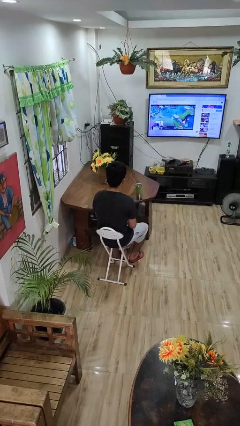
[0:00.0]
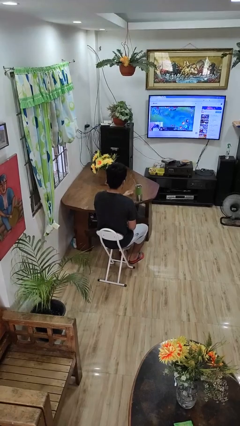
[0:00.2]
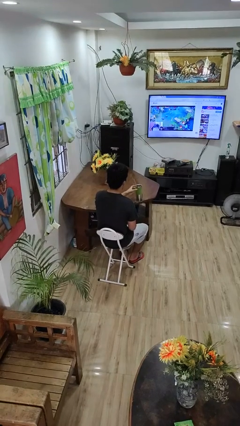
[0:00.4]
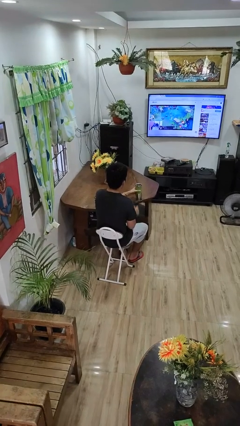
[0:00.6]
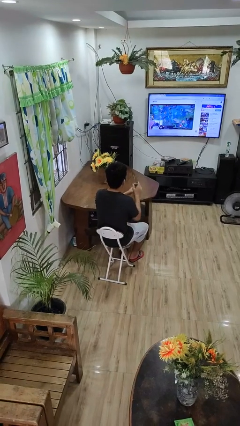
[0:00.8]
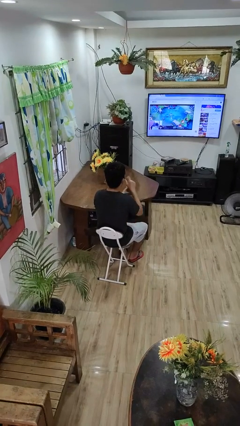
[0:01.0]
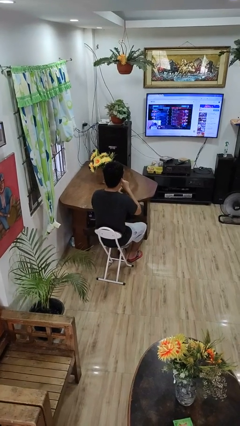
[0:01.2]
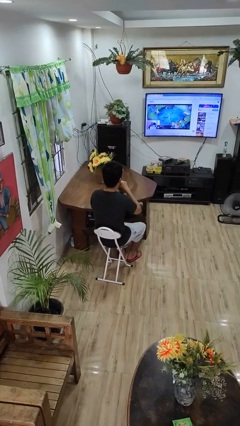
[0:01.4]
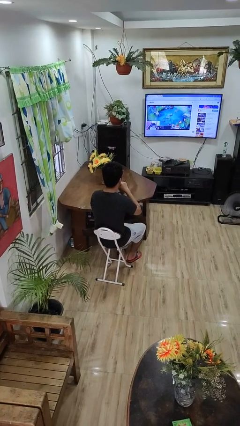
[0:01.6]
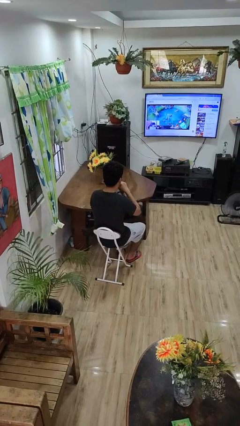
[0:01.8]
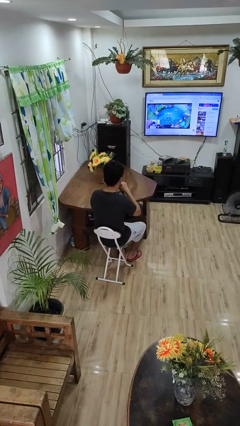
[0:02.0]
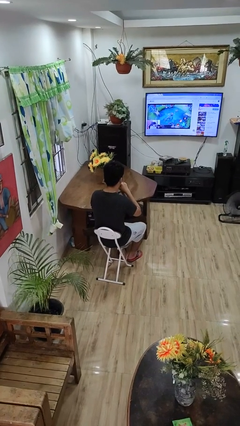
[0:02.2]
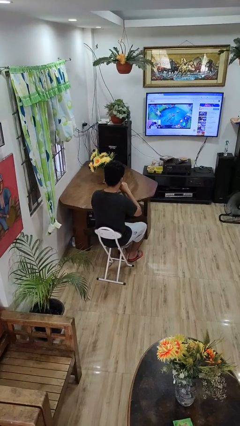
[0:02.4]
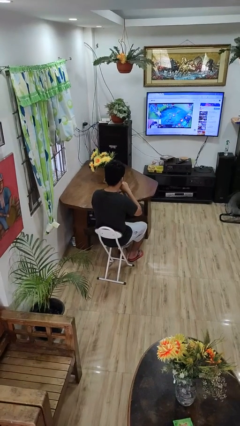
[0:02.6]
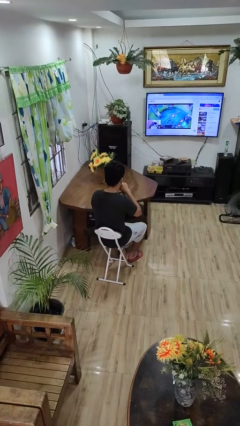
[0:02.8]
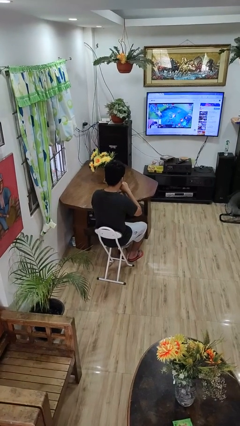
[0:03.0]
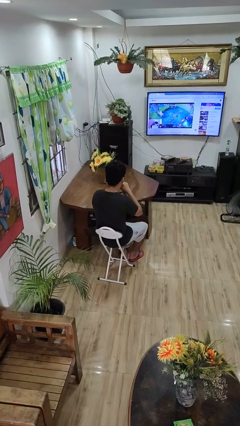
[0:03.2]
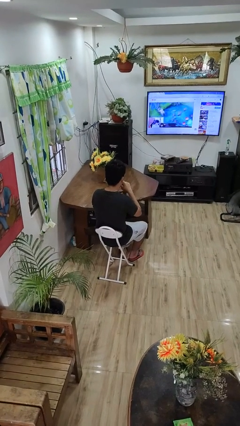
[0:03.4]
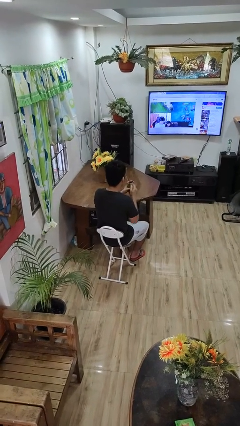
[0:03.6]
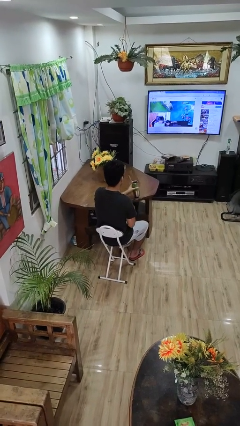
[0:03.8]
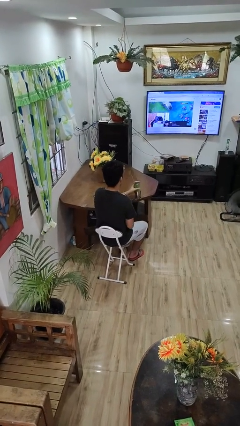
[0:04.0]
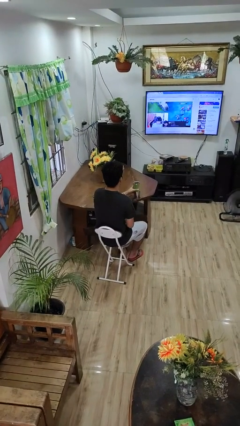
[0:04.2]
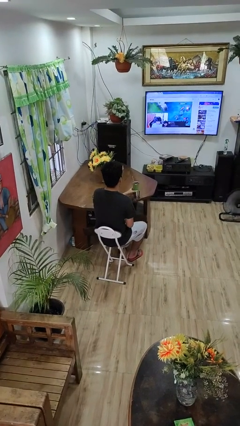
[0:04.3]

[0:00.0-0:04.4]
person drinks from straw

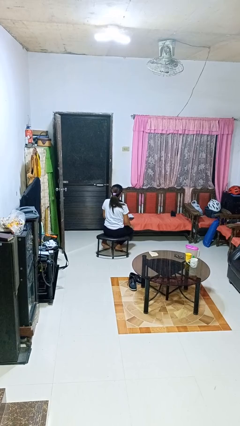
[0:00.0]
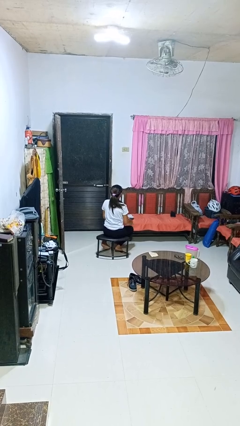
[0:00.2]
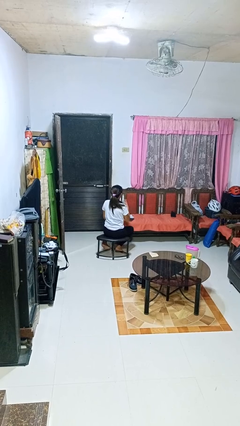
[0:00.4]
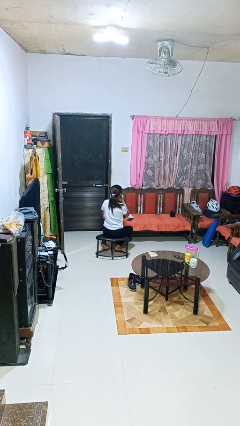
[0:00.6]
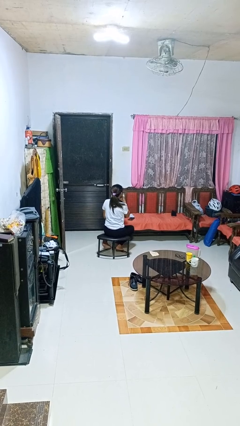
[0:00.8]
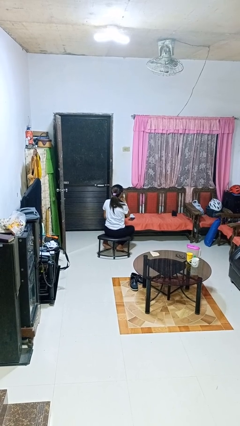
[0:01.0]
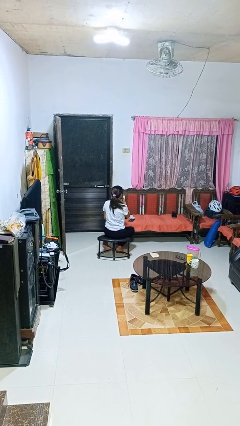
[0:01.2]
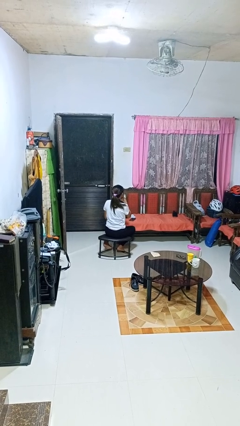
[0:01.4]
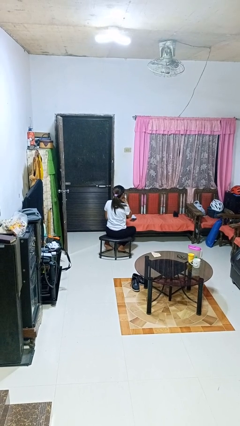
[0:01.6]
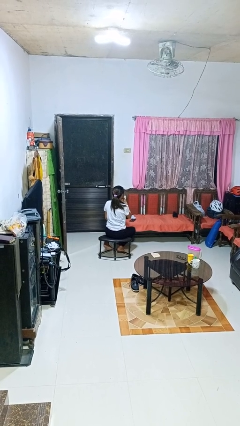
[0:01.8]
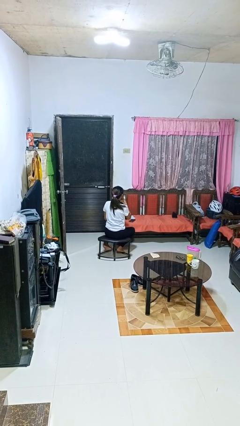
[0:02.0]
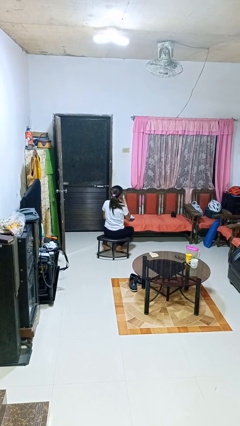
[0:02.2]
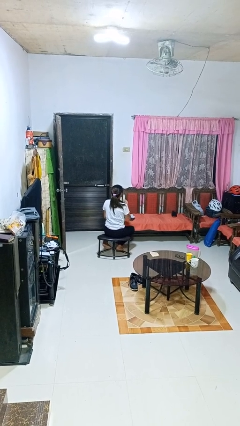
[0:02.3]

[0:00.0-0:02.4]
person strokes chin

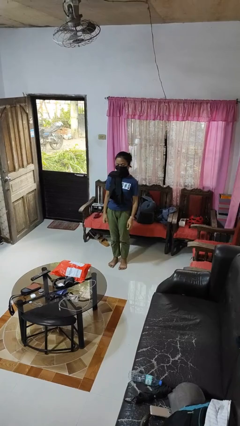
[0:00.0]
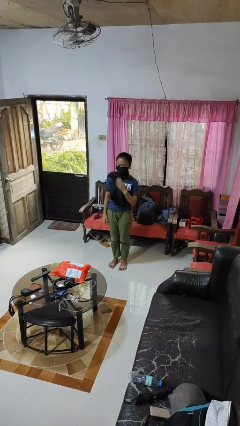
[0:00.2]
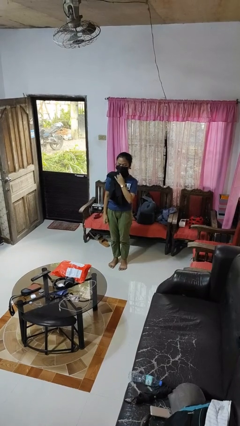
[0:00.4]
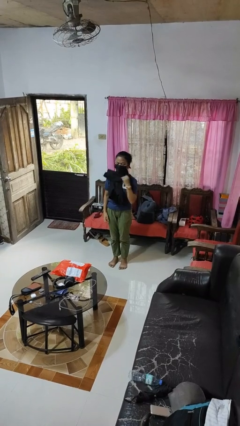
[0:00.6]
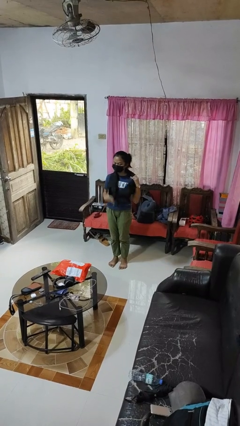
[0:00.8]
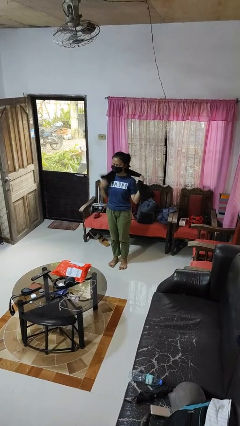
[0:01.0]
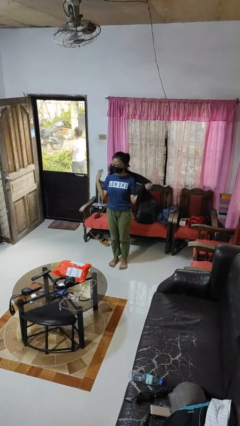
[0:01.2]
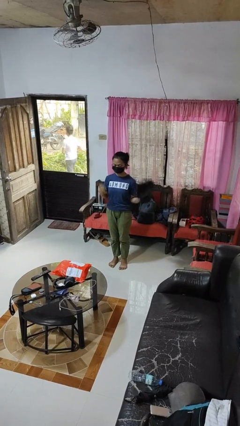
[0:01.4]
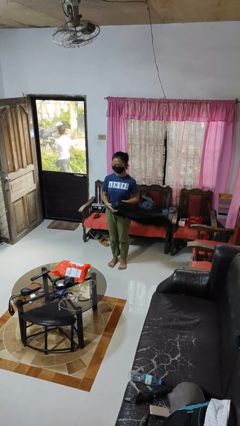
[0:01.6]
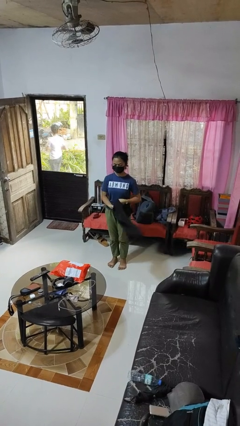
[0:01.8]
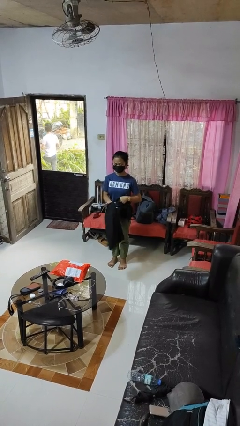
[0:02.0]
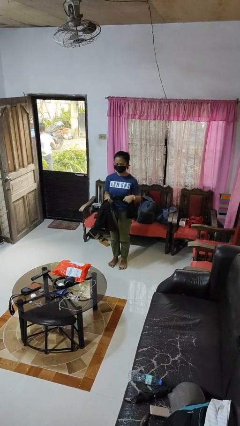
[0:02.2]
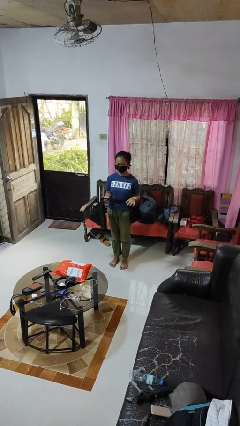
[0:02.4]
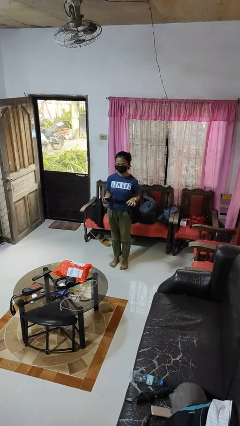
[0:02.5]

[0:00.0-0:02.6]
person takes off scarf

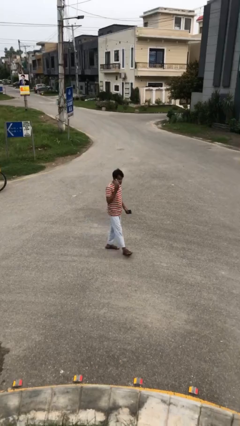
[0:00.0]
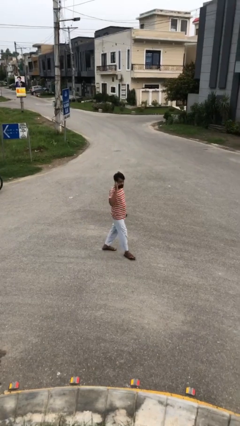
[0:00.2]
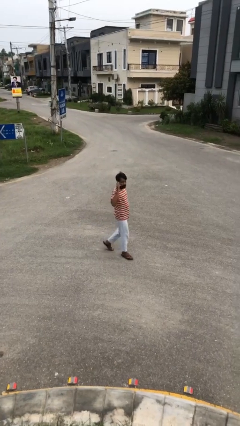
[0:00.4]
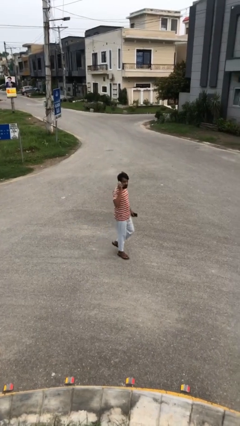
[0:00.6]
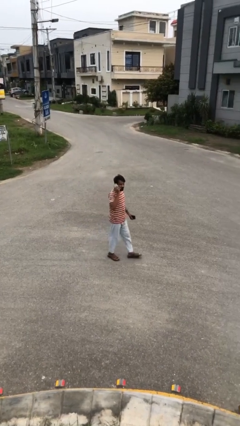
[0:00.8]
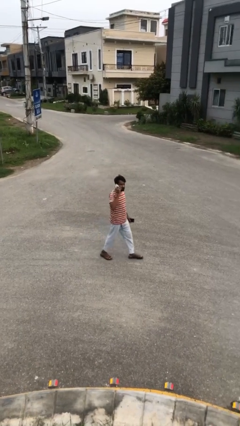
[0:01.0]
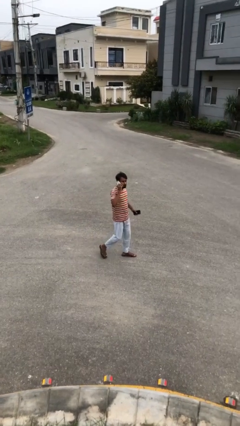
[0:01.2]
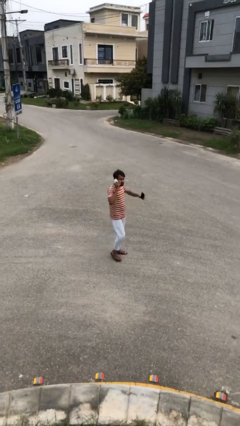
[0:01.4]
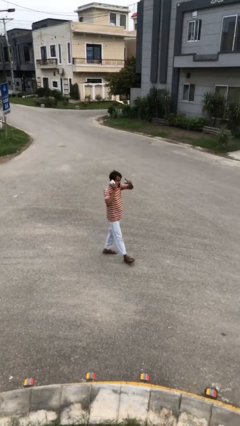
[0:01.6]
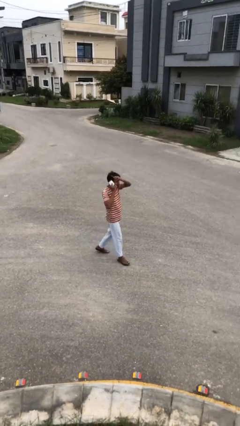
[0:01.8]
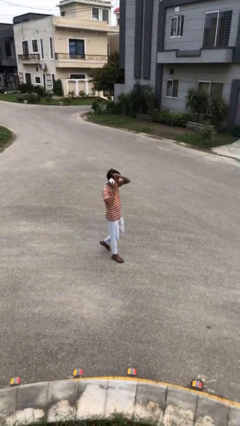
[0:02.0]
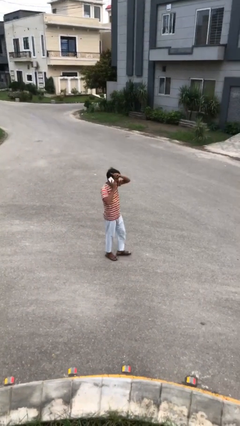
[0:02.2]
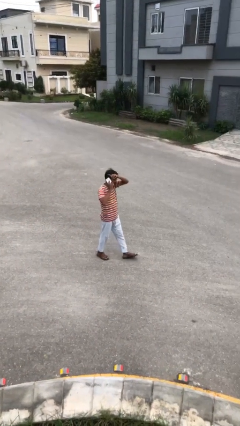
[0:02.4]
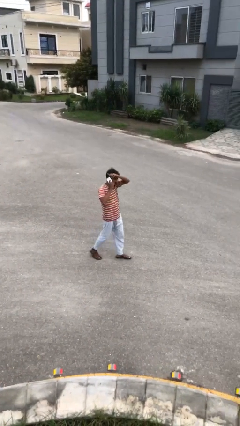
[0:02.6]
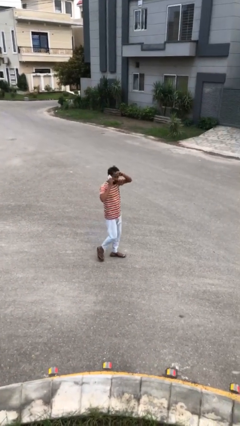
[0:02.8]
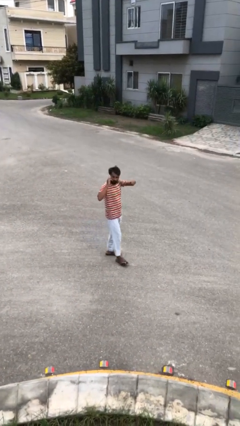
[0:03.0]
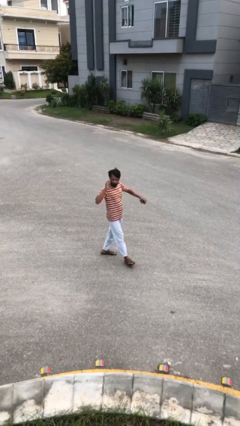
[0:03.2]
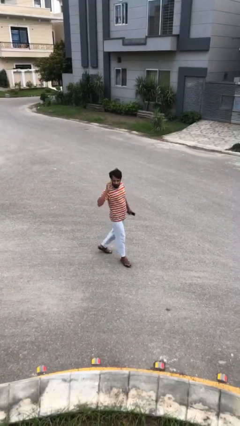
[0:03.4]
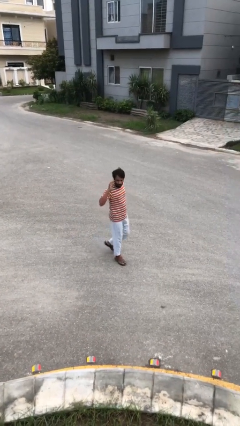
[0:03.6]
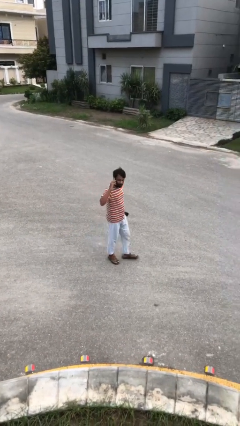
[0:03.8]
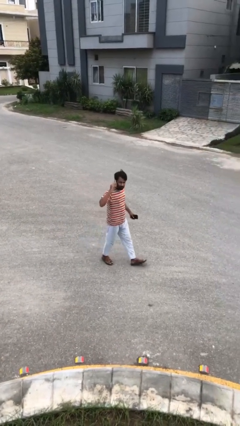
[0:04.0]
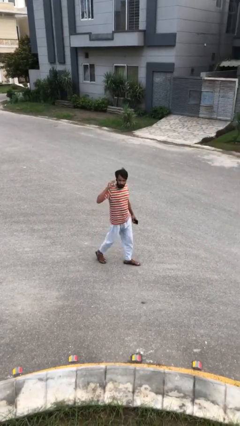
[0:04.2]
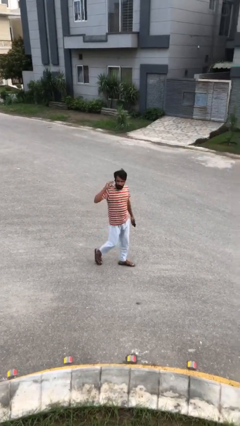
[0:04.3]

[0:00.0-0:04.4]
person talks on phone

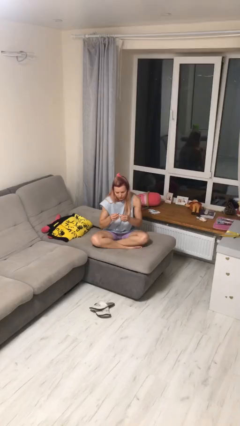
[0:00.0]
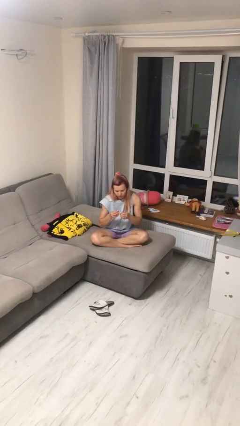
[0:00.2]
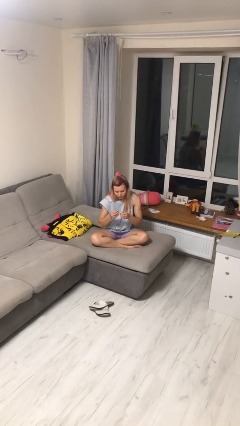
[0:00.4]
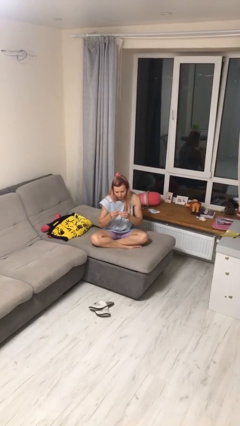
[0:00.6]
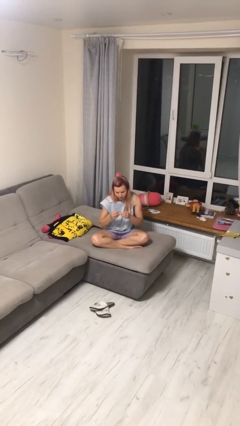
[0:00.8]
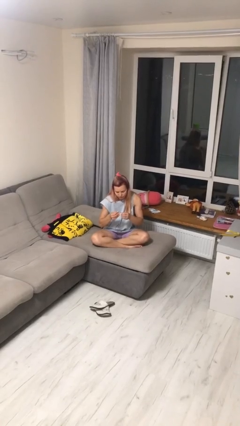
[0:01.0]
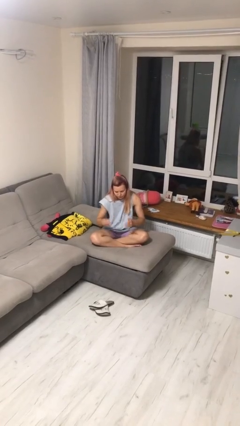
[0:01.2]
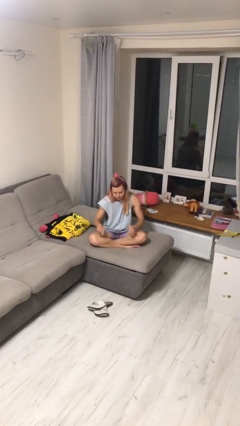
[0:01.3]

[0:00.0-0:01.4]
person clips fingernails

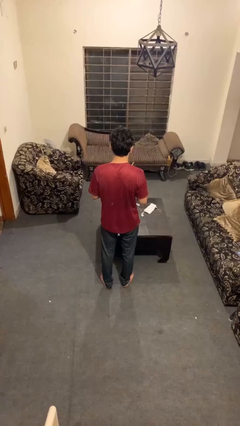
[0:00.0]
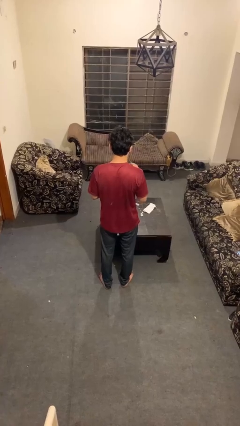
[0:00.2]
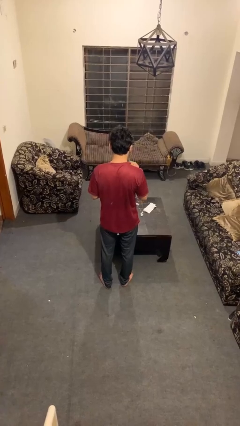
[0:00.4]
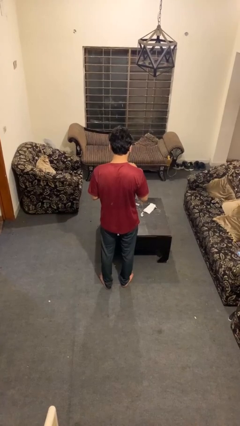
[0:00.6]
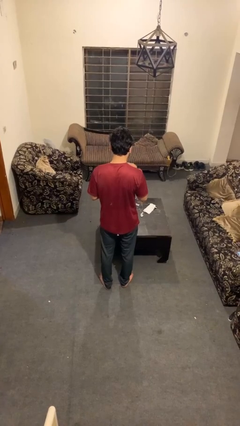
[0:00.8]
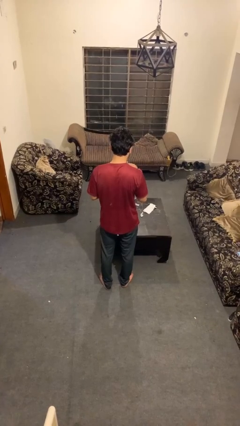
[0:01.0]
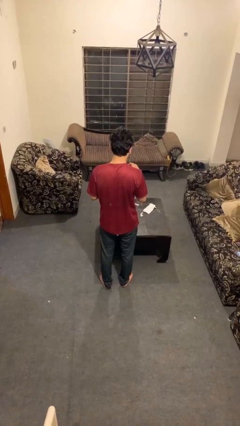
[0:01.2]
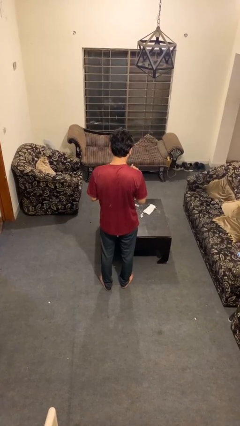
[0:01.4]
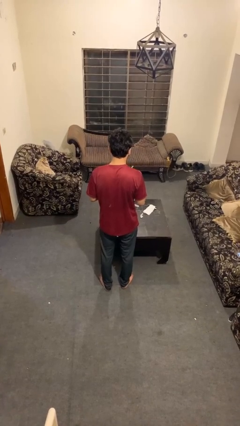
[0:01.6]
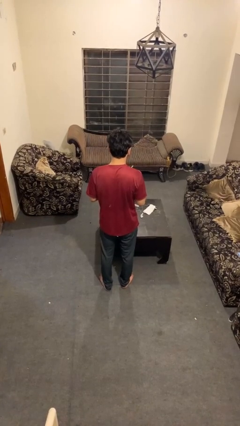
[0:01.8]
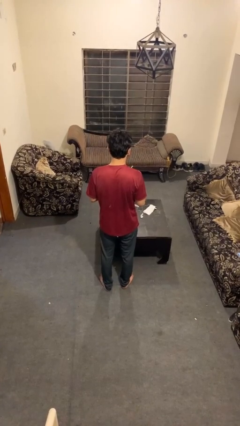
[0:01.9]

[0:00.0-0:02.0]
person stirs mug

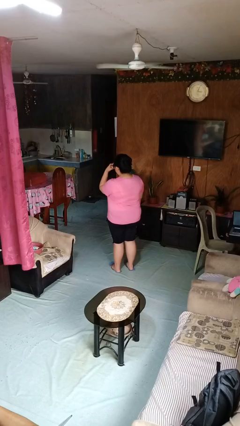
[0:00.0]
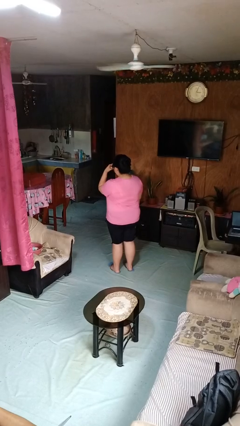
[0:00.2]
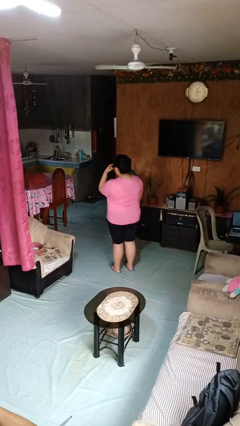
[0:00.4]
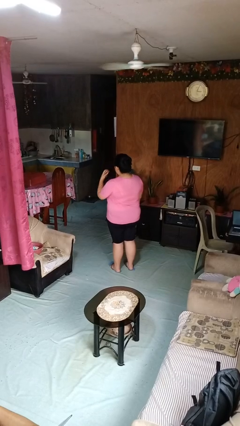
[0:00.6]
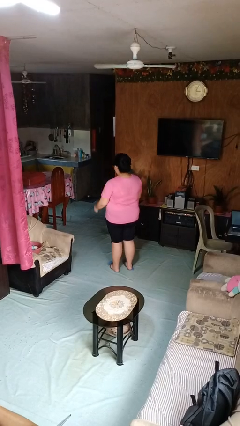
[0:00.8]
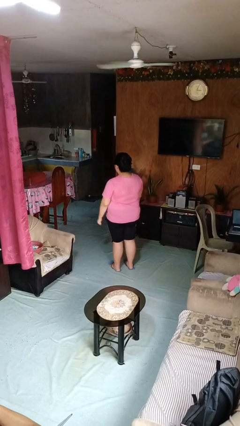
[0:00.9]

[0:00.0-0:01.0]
person gestures watch closely
